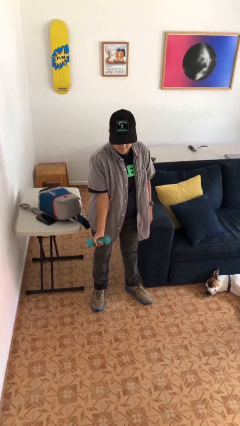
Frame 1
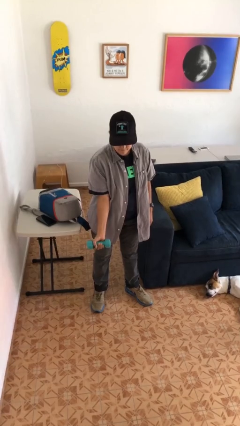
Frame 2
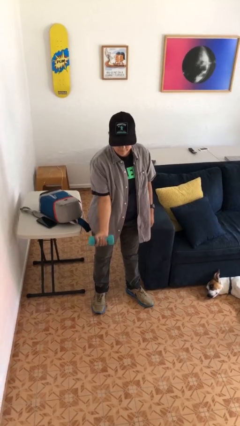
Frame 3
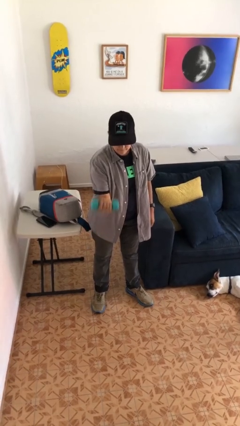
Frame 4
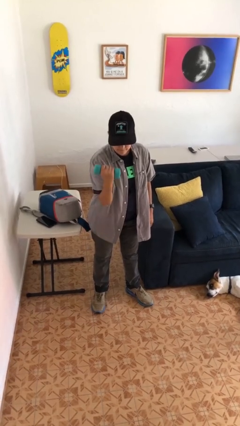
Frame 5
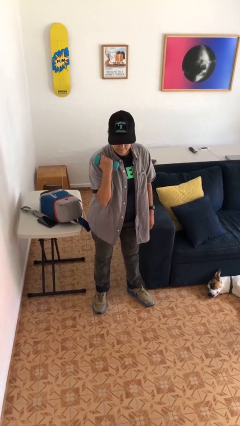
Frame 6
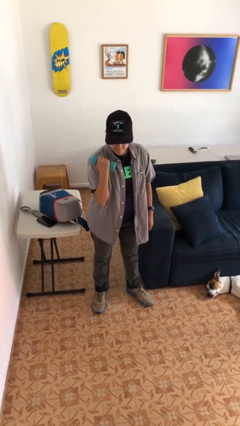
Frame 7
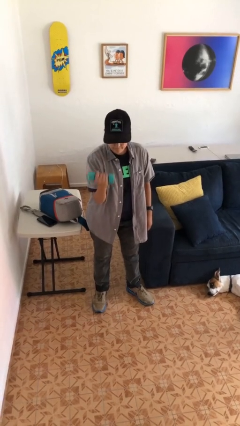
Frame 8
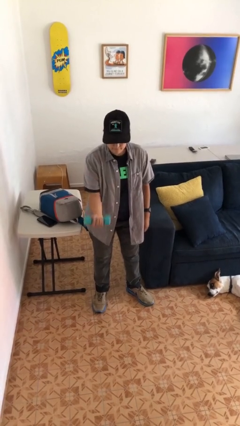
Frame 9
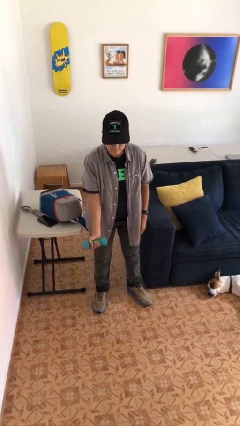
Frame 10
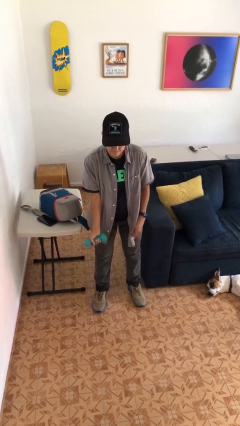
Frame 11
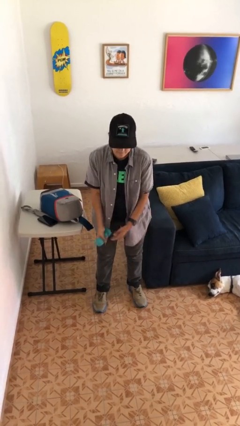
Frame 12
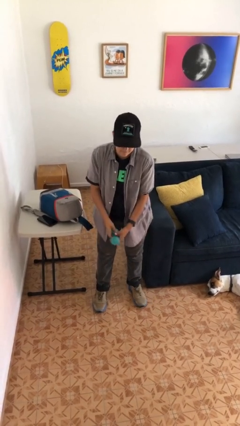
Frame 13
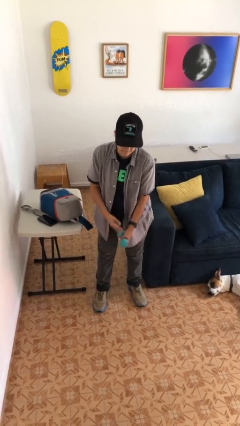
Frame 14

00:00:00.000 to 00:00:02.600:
person lifts dumbbells

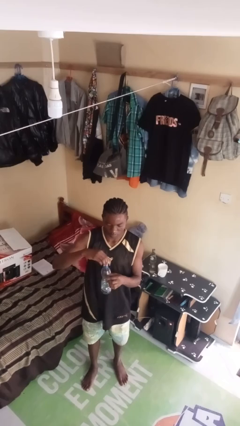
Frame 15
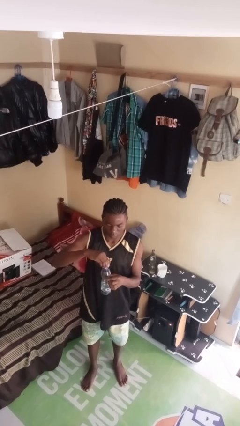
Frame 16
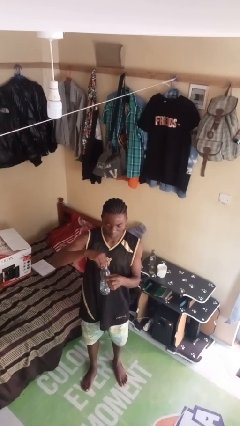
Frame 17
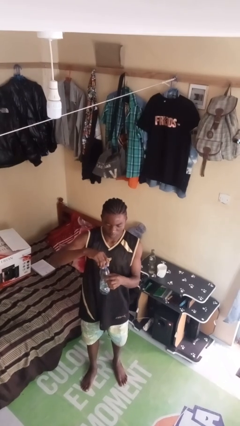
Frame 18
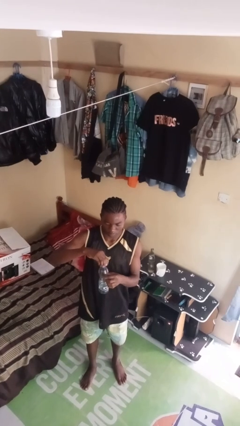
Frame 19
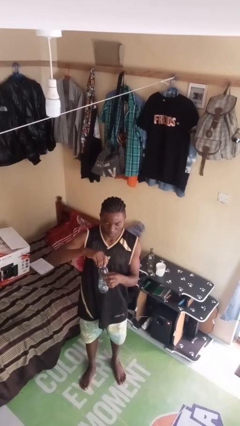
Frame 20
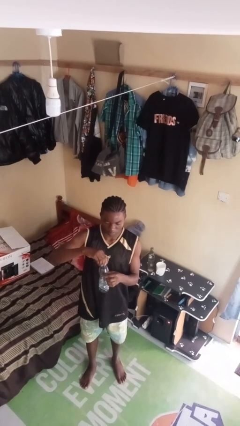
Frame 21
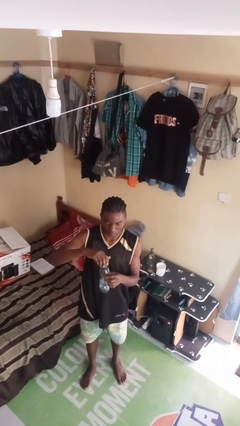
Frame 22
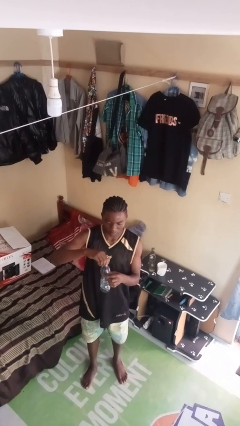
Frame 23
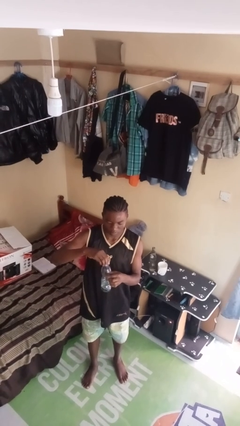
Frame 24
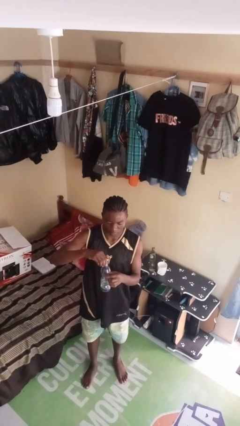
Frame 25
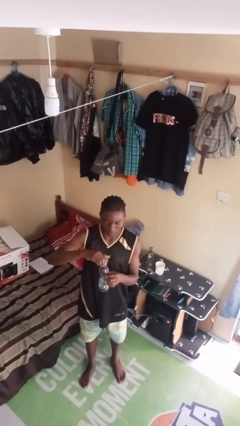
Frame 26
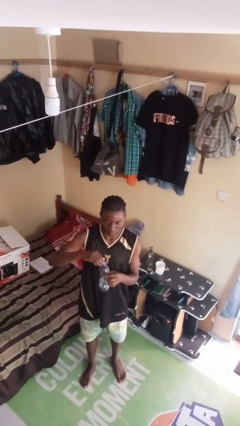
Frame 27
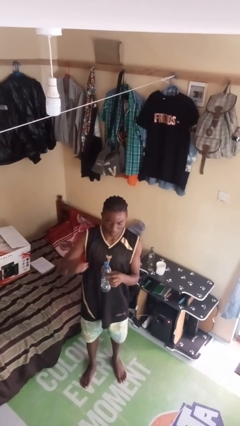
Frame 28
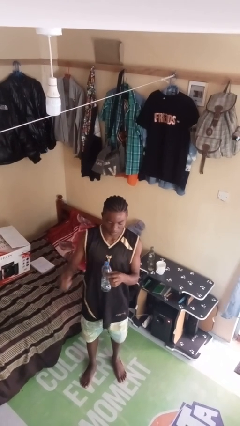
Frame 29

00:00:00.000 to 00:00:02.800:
person screws lid to bottle

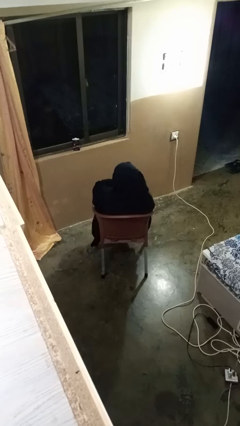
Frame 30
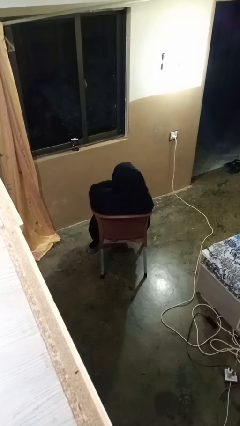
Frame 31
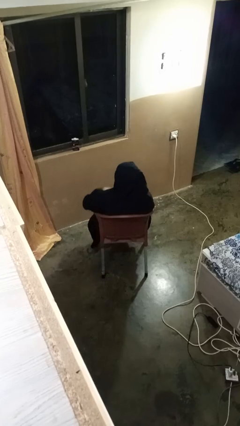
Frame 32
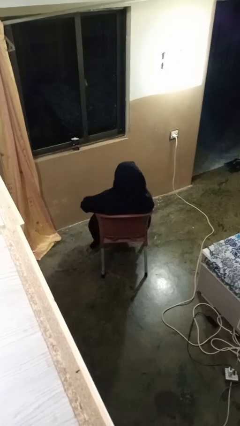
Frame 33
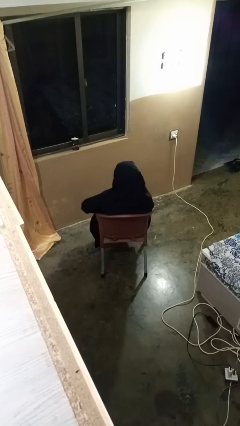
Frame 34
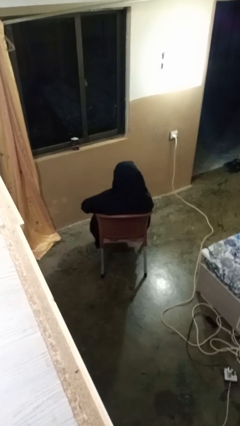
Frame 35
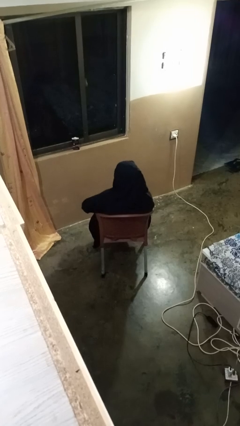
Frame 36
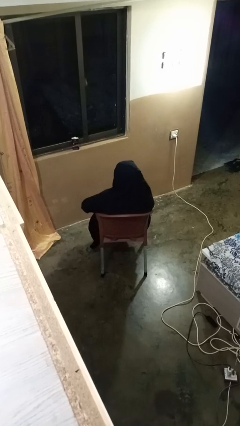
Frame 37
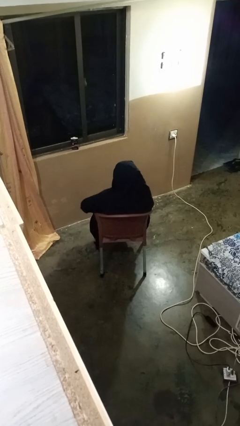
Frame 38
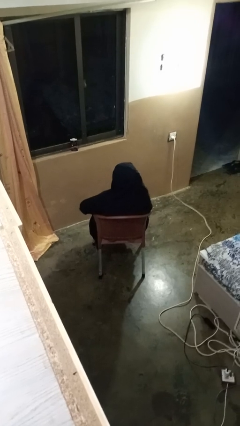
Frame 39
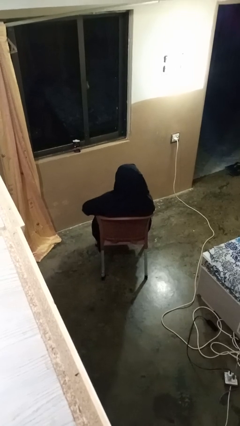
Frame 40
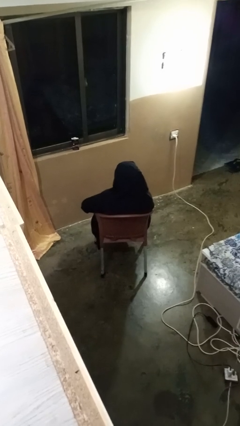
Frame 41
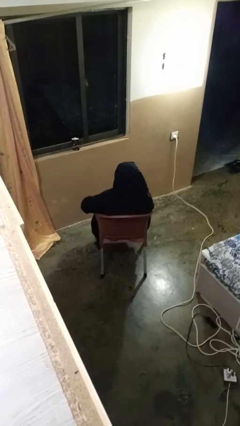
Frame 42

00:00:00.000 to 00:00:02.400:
person gestures swipe down

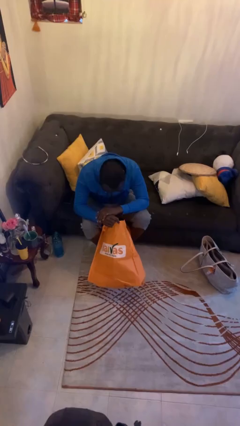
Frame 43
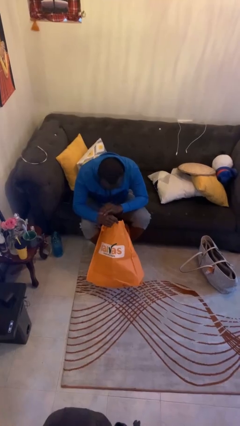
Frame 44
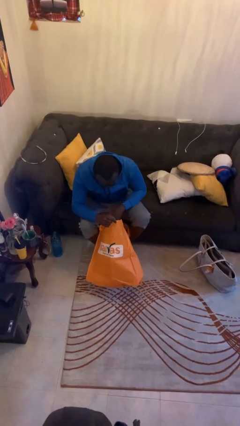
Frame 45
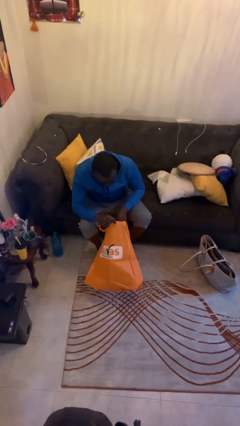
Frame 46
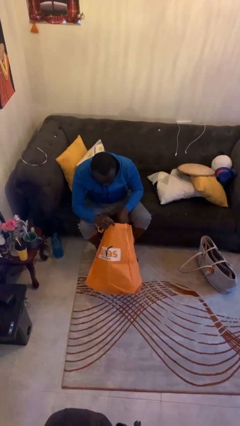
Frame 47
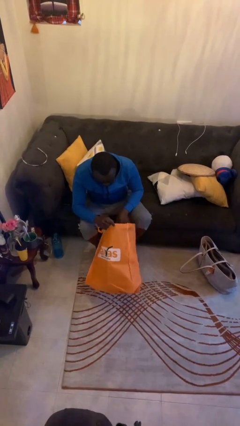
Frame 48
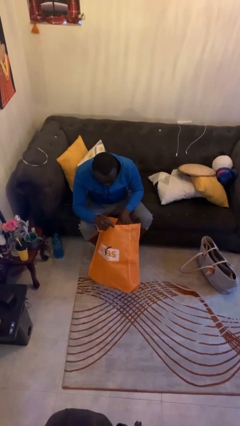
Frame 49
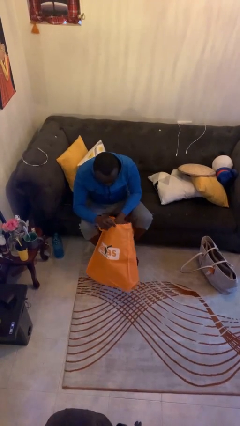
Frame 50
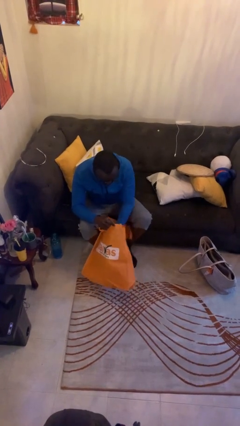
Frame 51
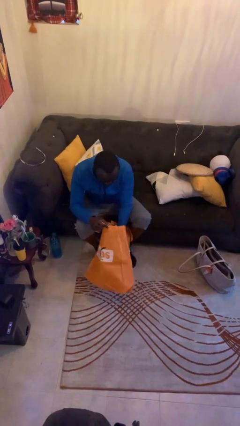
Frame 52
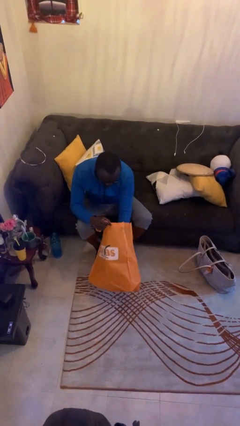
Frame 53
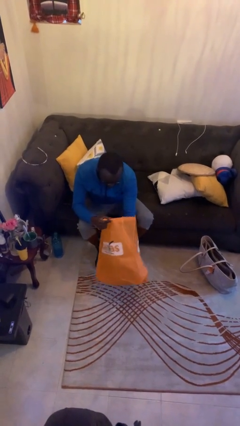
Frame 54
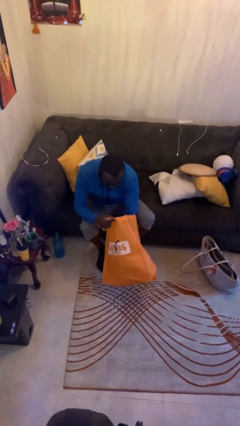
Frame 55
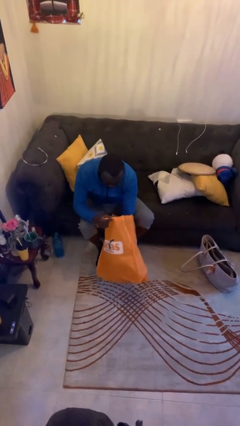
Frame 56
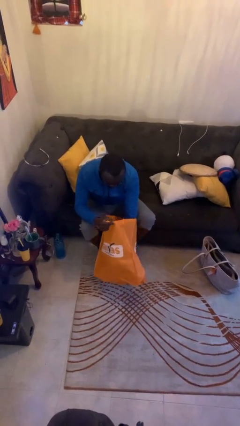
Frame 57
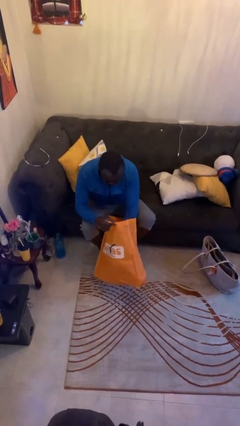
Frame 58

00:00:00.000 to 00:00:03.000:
person searches in bag

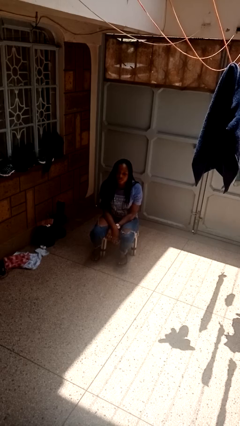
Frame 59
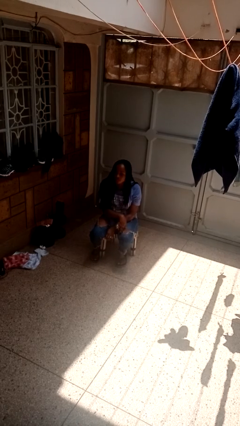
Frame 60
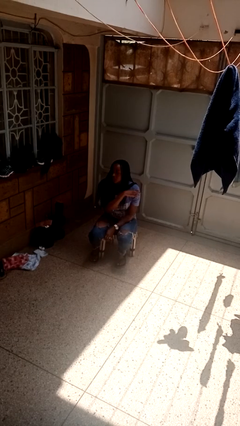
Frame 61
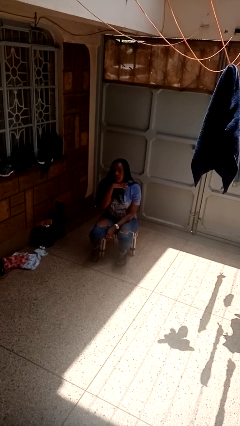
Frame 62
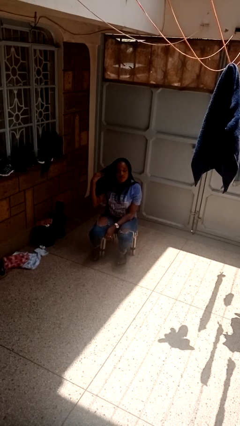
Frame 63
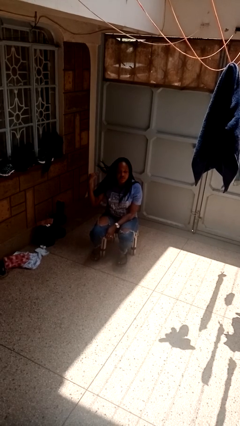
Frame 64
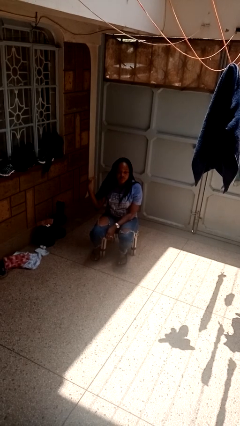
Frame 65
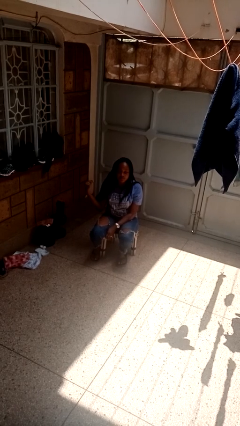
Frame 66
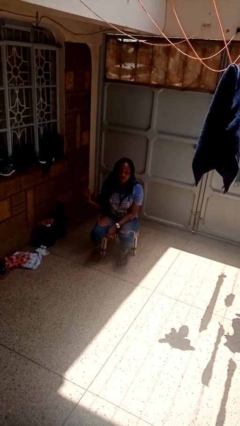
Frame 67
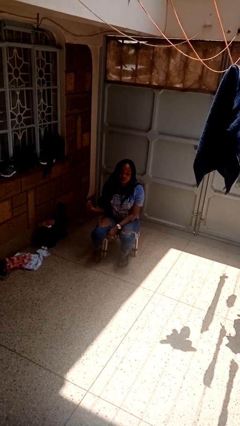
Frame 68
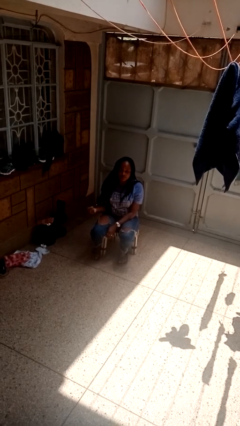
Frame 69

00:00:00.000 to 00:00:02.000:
person gestures cut

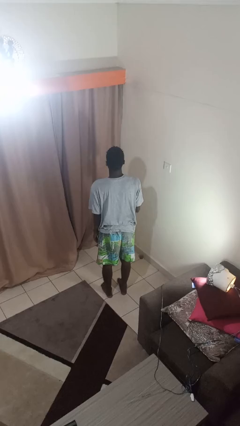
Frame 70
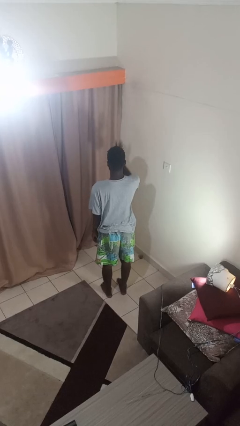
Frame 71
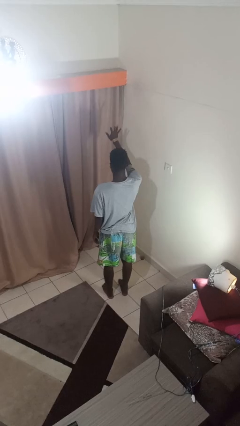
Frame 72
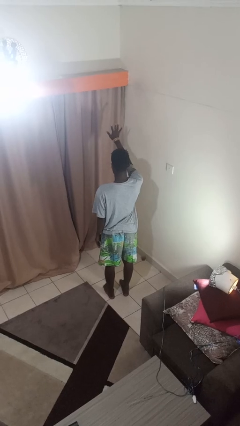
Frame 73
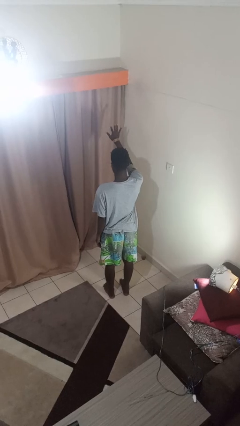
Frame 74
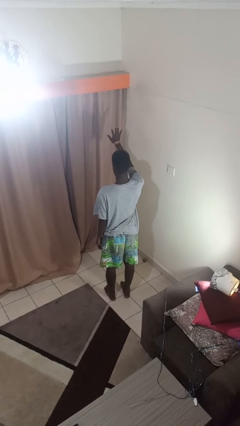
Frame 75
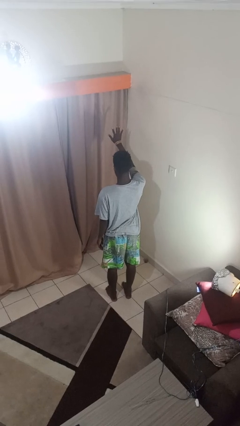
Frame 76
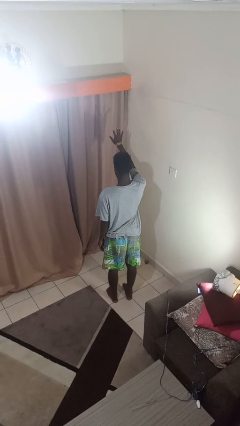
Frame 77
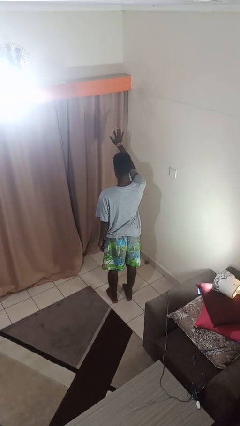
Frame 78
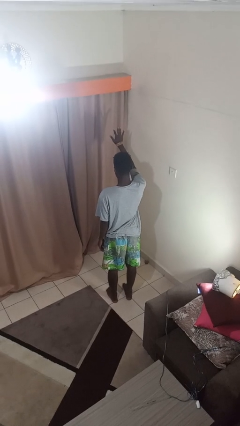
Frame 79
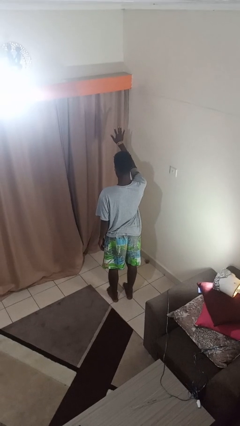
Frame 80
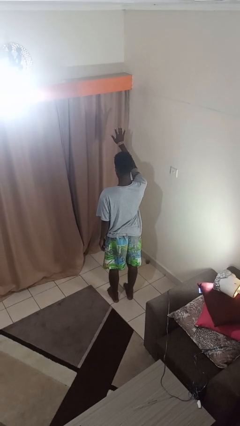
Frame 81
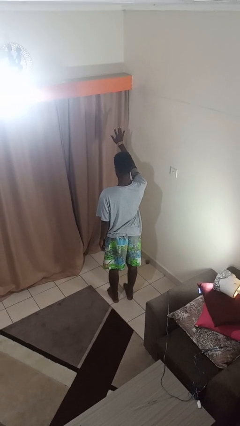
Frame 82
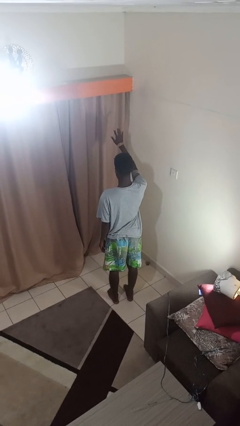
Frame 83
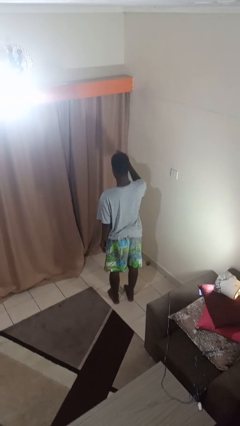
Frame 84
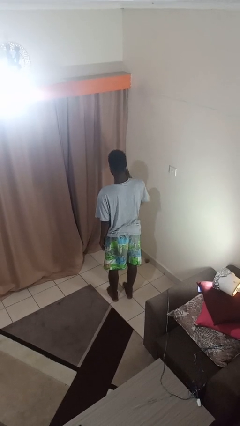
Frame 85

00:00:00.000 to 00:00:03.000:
person gestures number five

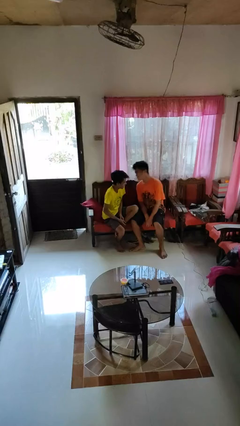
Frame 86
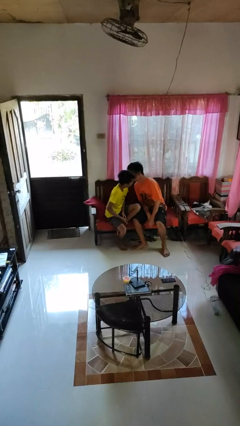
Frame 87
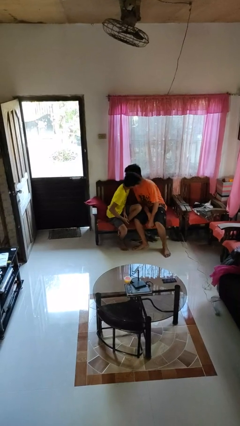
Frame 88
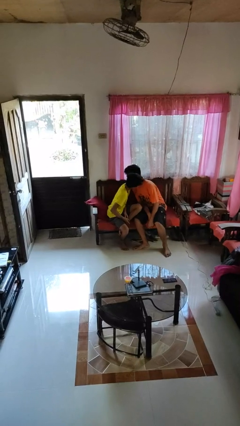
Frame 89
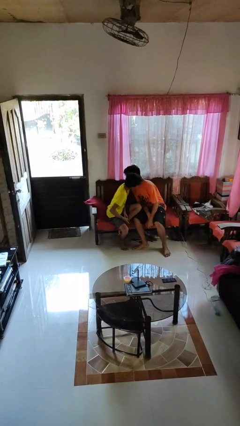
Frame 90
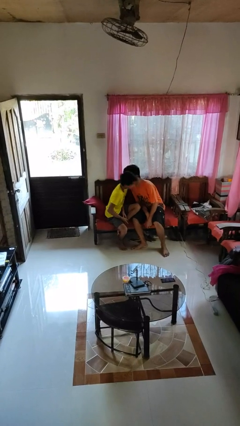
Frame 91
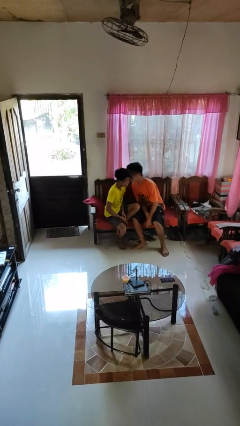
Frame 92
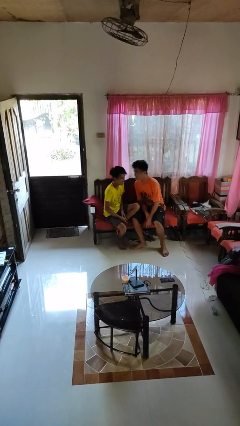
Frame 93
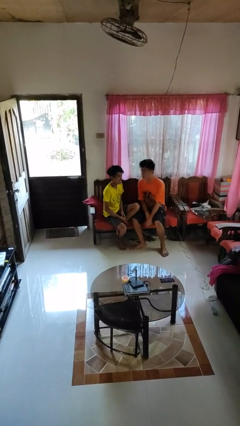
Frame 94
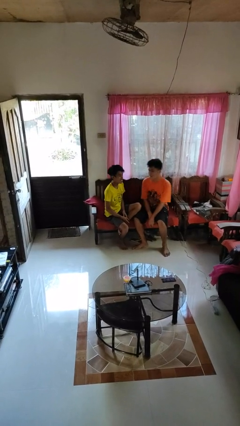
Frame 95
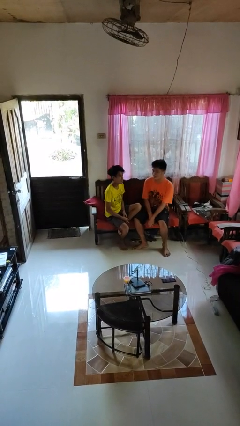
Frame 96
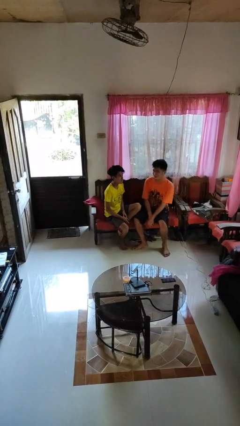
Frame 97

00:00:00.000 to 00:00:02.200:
person kisses cheek of person
